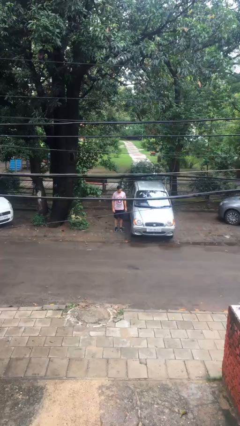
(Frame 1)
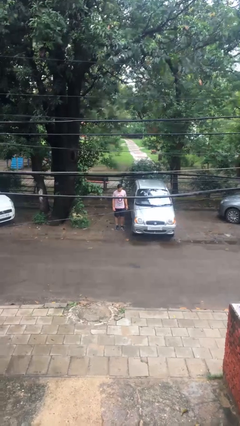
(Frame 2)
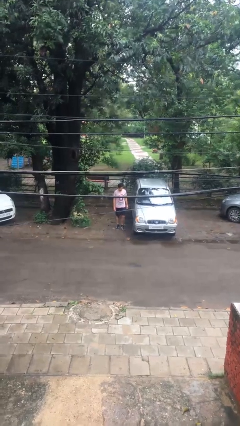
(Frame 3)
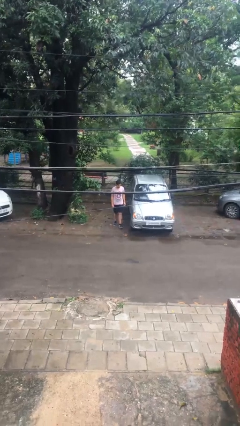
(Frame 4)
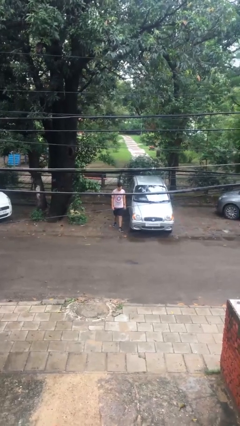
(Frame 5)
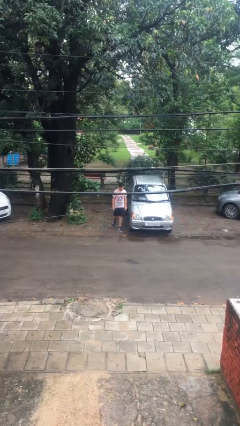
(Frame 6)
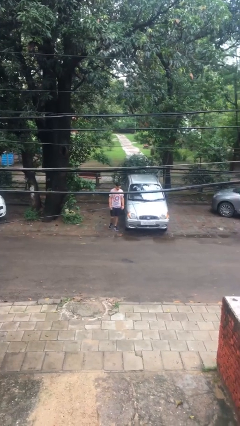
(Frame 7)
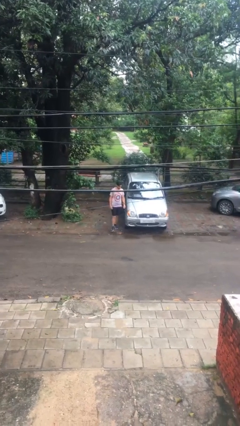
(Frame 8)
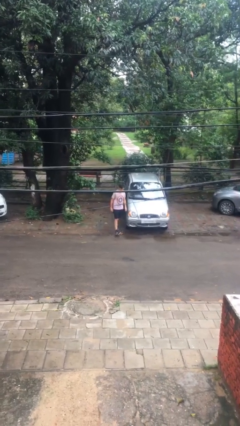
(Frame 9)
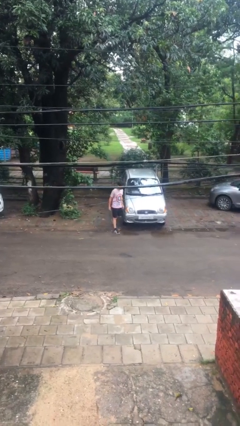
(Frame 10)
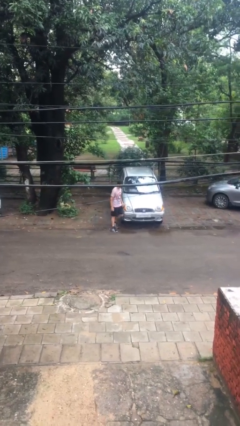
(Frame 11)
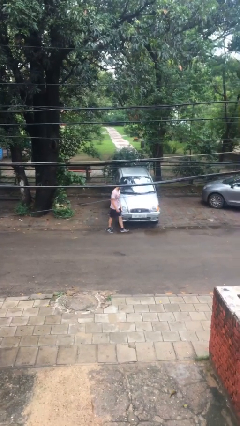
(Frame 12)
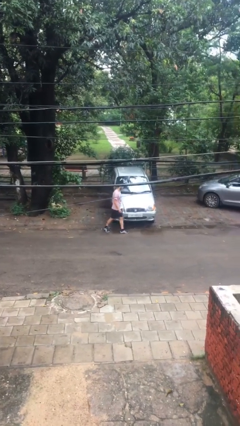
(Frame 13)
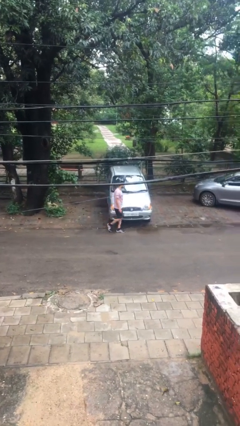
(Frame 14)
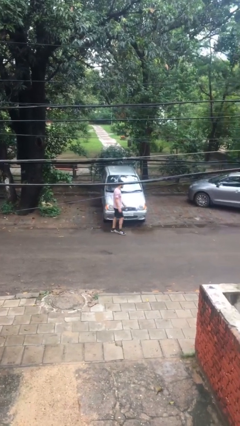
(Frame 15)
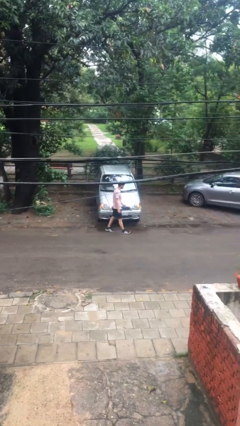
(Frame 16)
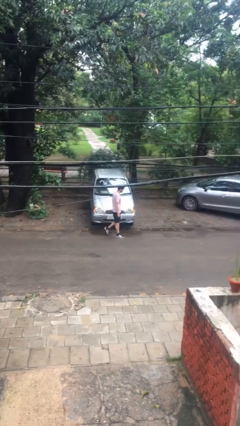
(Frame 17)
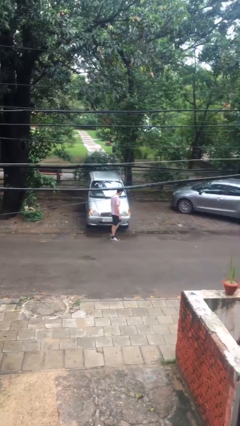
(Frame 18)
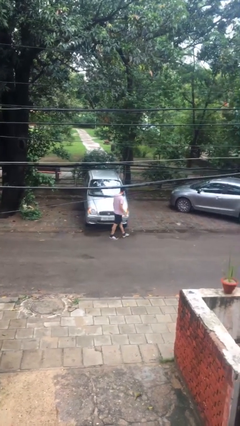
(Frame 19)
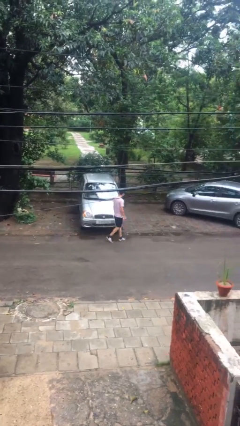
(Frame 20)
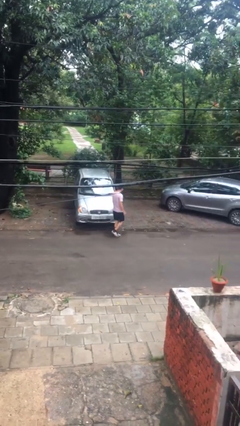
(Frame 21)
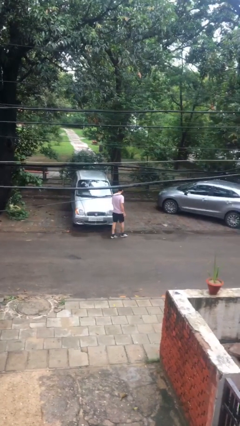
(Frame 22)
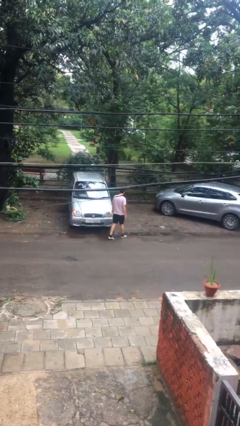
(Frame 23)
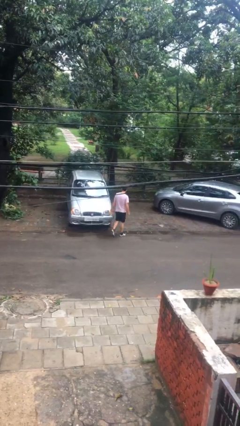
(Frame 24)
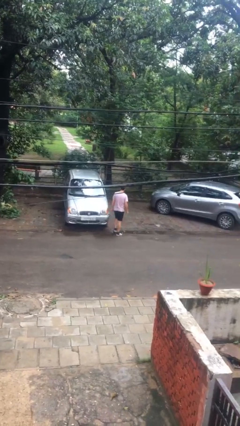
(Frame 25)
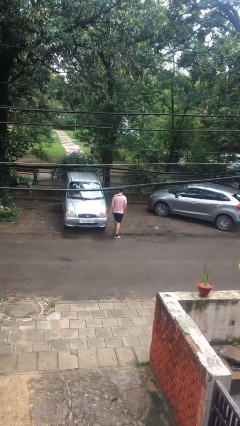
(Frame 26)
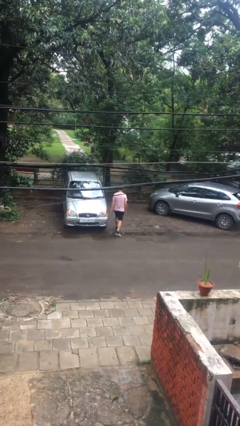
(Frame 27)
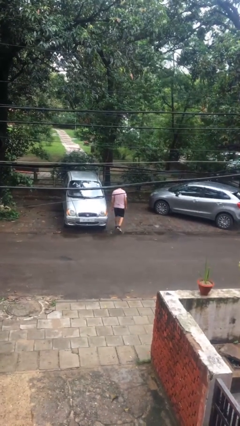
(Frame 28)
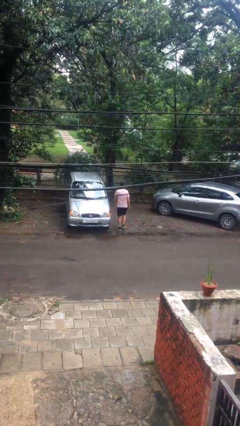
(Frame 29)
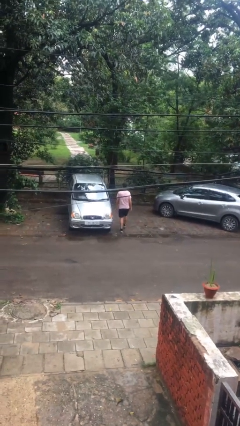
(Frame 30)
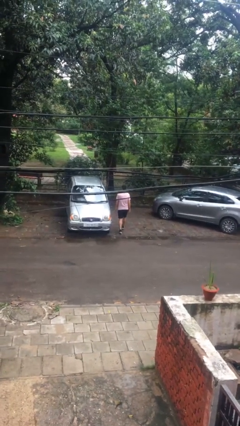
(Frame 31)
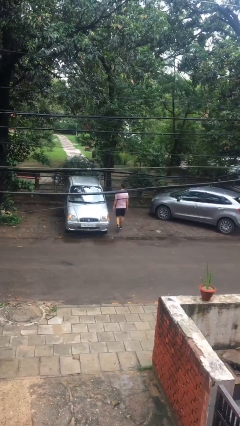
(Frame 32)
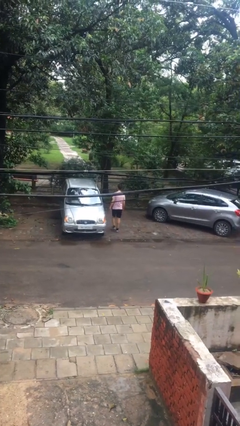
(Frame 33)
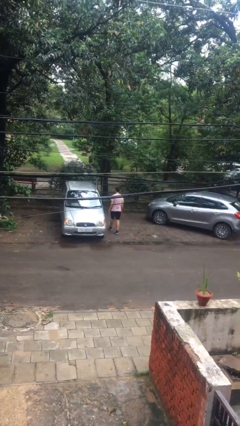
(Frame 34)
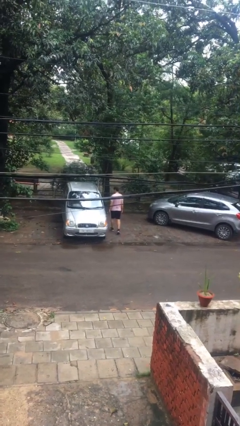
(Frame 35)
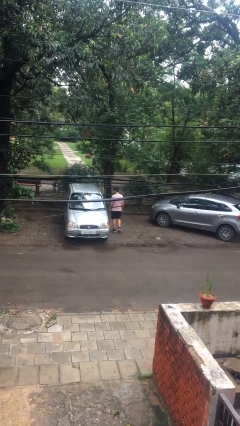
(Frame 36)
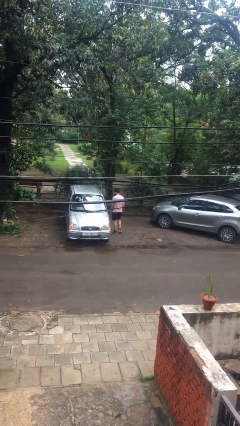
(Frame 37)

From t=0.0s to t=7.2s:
person walks around car

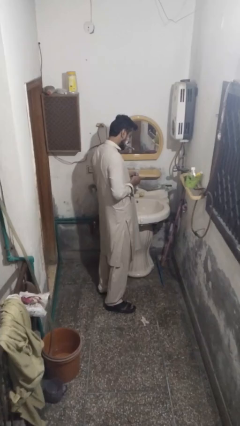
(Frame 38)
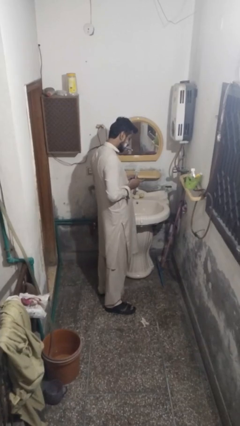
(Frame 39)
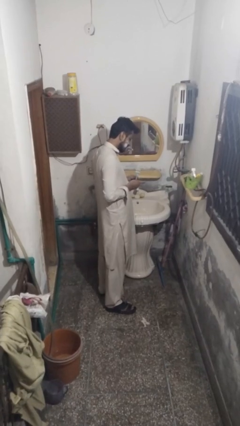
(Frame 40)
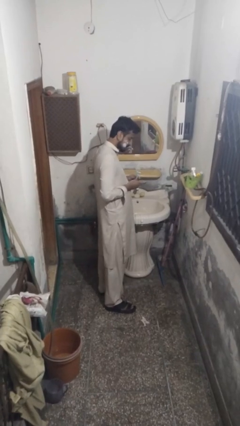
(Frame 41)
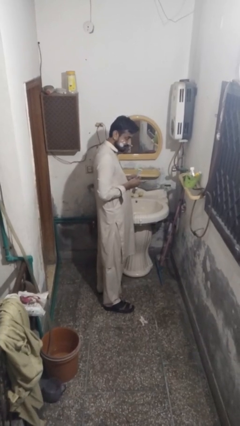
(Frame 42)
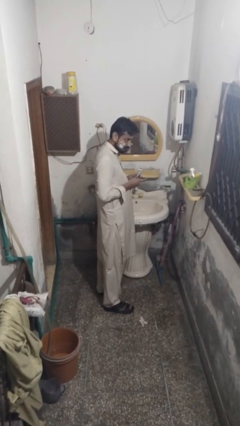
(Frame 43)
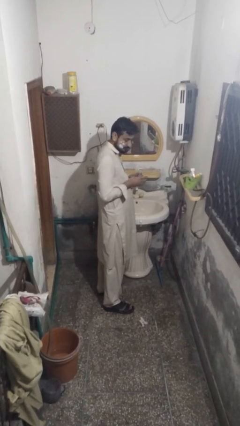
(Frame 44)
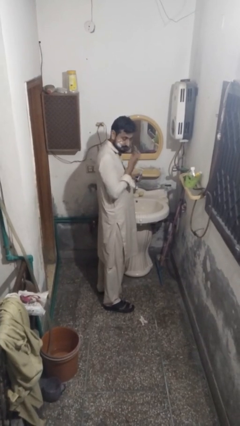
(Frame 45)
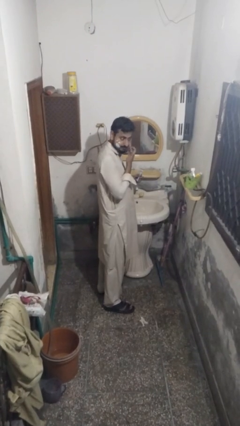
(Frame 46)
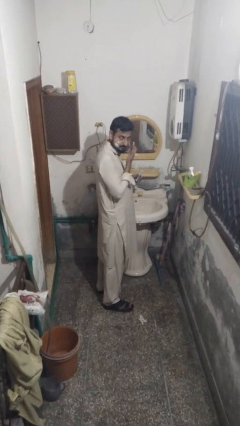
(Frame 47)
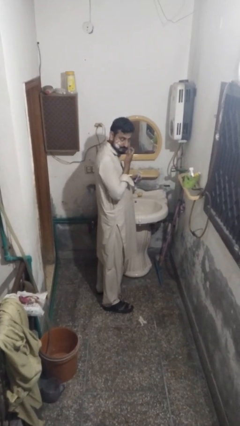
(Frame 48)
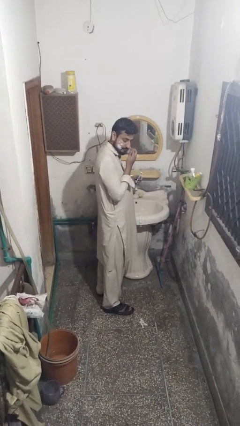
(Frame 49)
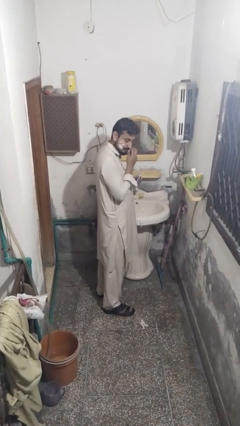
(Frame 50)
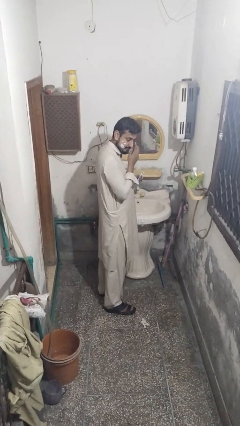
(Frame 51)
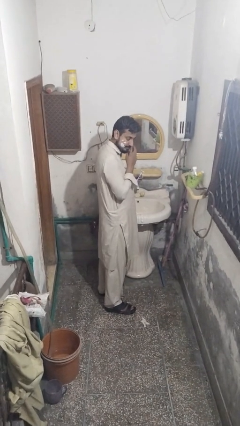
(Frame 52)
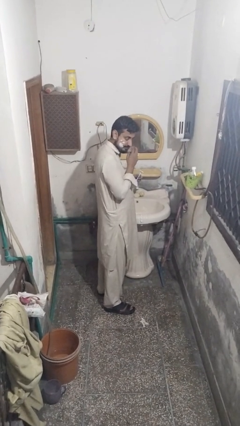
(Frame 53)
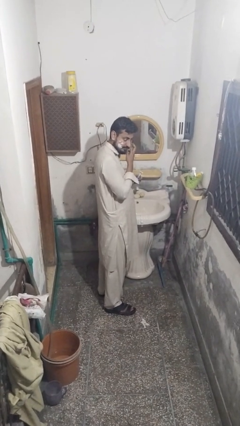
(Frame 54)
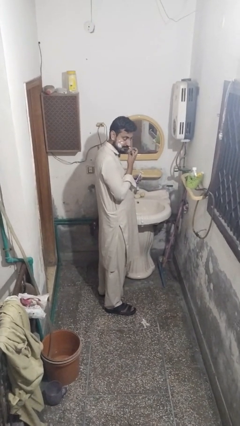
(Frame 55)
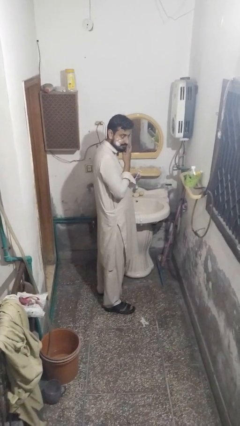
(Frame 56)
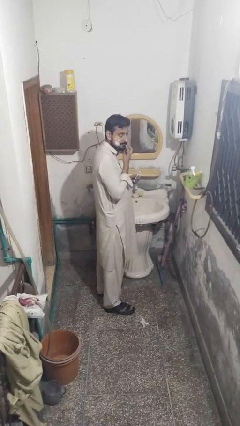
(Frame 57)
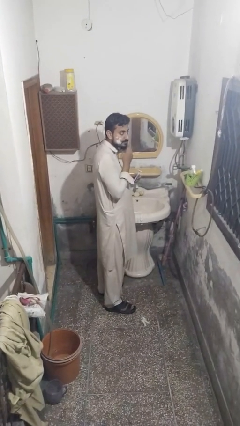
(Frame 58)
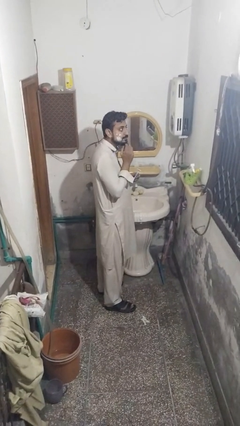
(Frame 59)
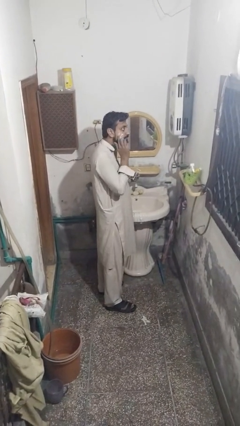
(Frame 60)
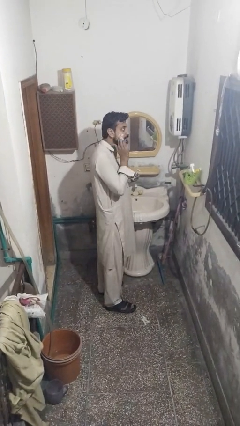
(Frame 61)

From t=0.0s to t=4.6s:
person applies shaving cream

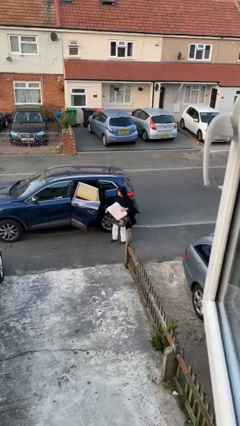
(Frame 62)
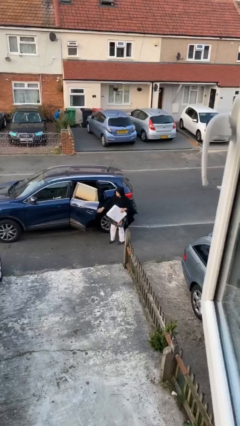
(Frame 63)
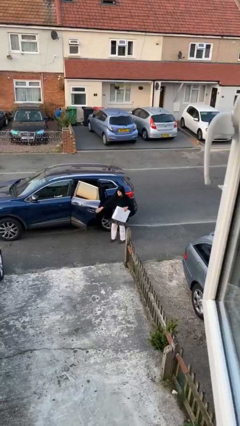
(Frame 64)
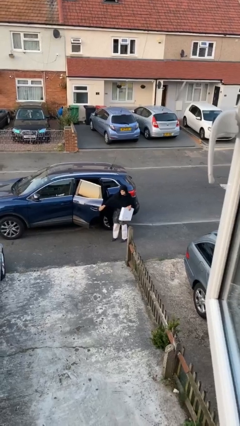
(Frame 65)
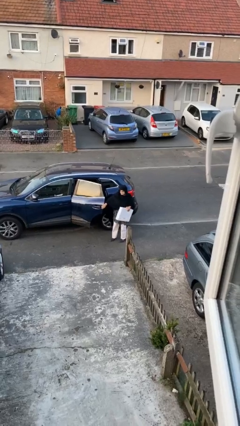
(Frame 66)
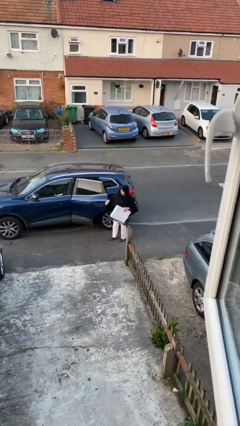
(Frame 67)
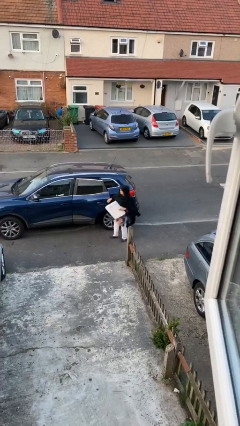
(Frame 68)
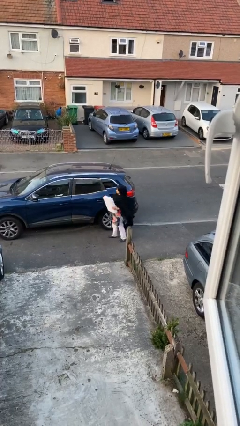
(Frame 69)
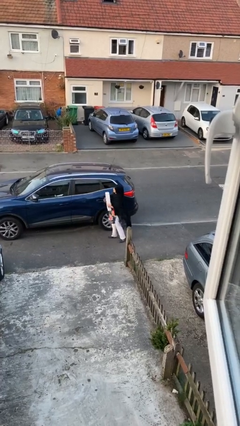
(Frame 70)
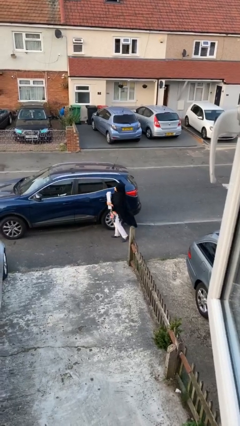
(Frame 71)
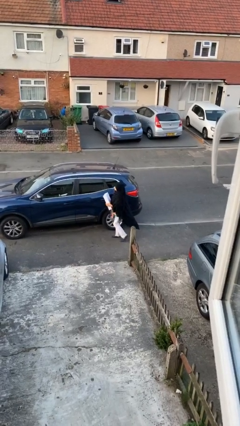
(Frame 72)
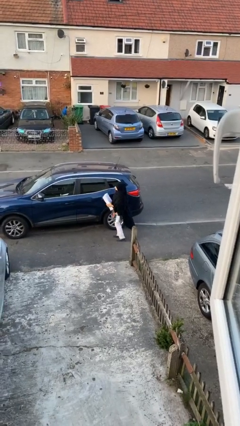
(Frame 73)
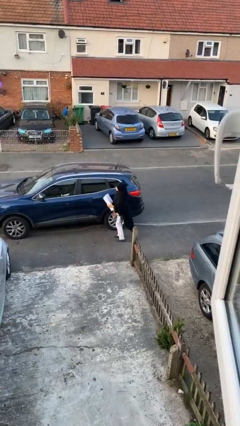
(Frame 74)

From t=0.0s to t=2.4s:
person closes car door

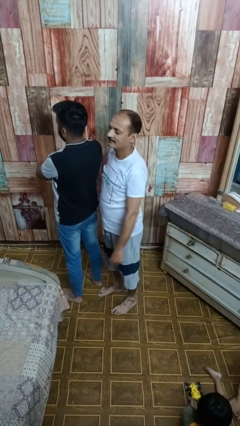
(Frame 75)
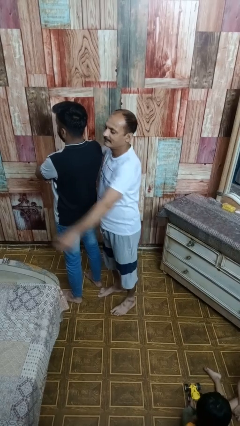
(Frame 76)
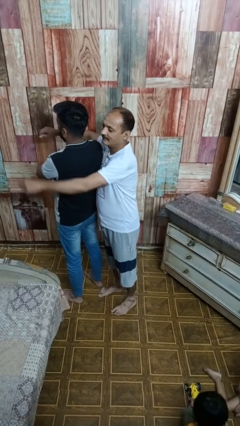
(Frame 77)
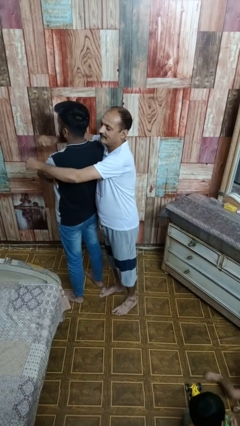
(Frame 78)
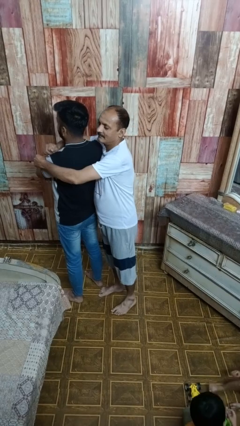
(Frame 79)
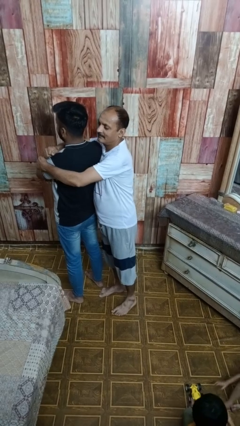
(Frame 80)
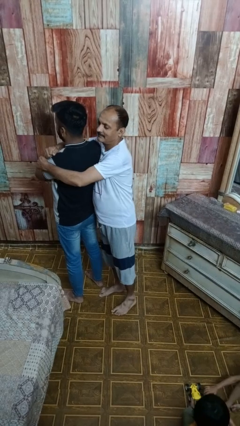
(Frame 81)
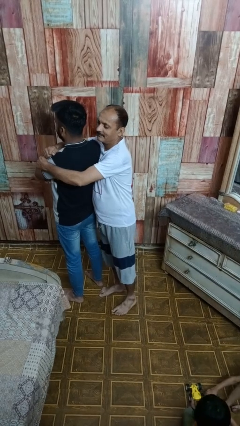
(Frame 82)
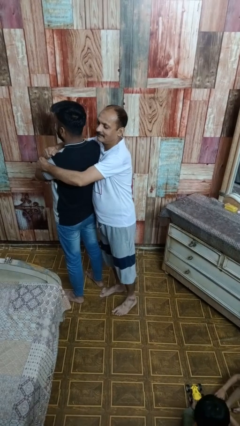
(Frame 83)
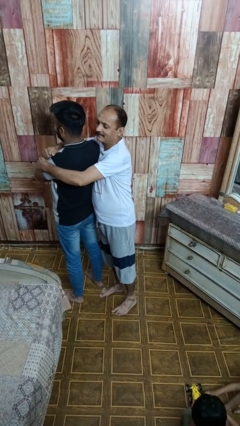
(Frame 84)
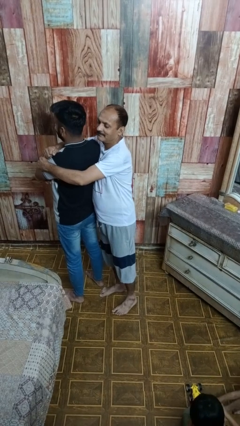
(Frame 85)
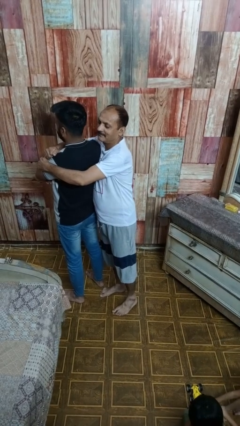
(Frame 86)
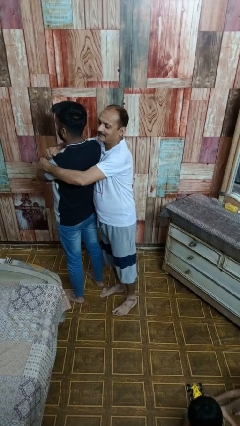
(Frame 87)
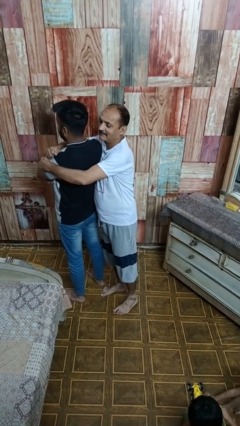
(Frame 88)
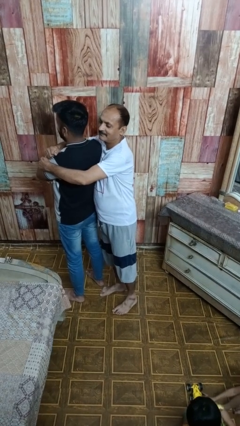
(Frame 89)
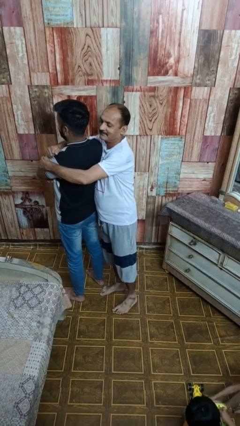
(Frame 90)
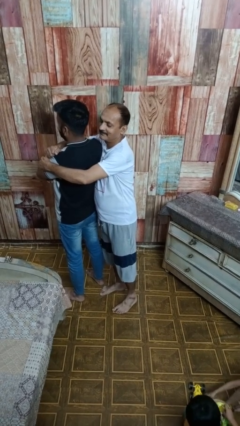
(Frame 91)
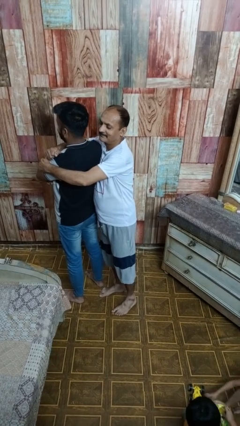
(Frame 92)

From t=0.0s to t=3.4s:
person hugs person from behind
